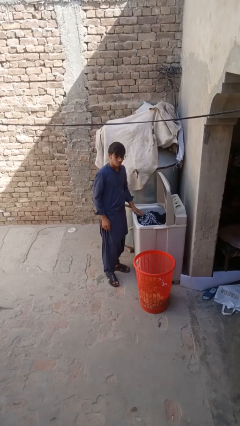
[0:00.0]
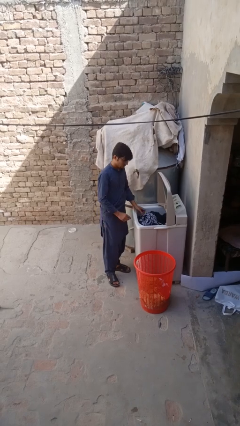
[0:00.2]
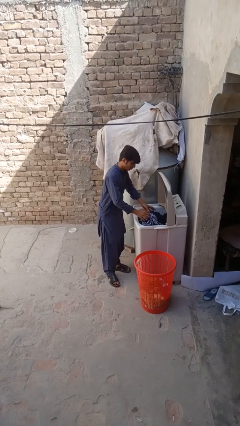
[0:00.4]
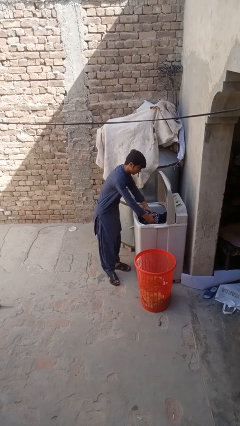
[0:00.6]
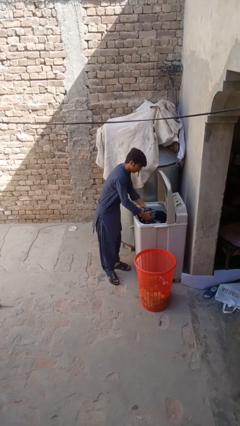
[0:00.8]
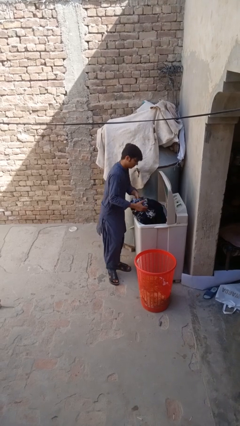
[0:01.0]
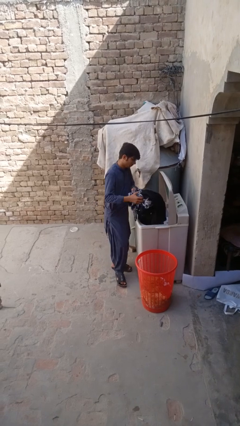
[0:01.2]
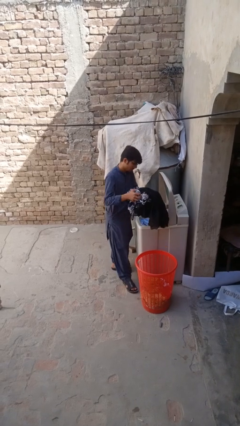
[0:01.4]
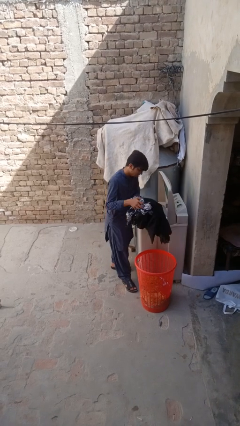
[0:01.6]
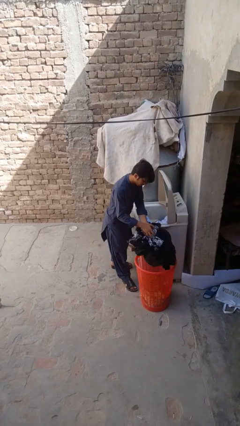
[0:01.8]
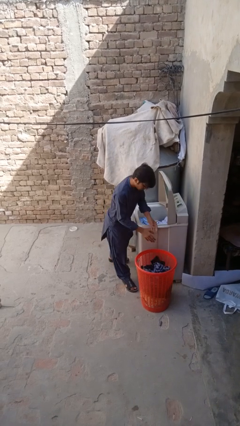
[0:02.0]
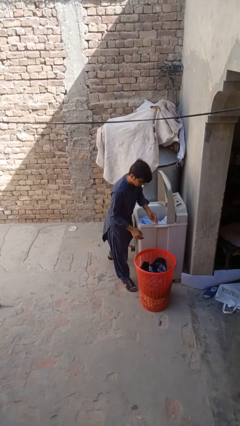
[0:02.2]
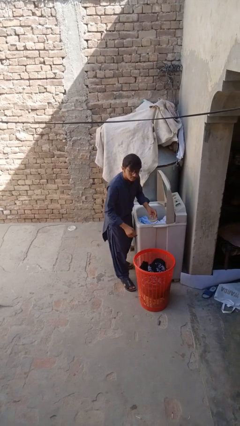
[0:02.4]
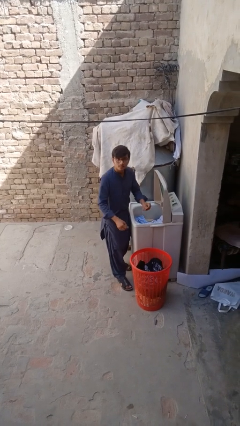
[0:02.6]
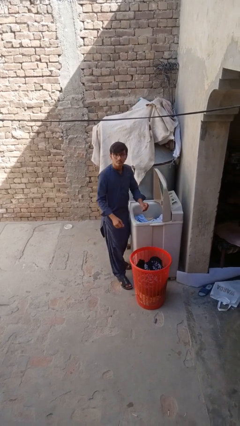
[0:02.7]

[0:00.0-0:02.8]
person unloads clotheswasher

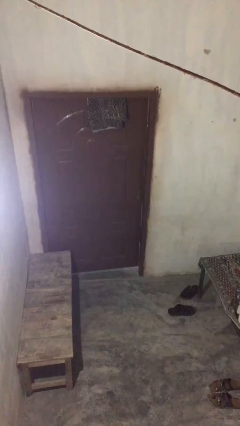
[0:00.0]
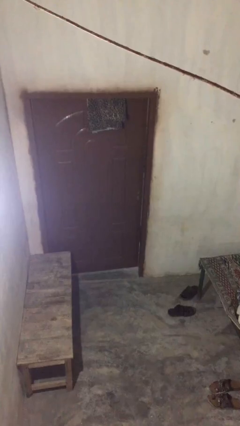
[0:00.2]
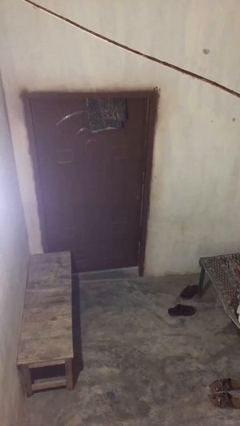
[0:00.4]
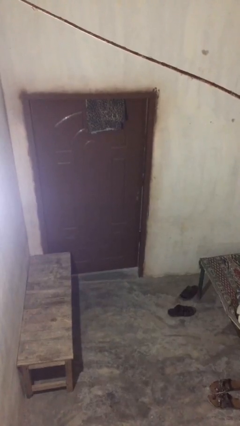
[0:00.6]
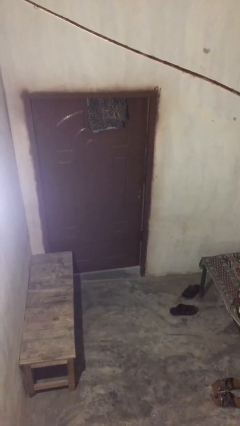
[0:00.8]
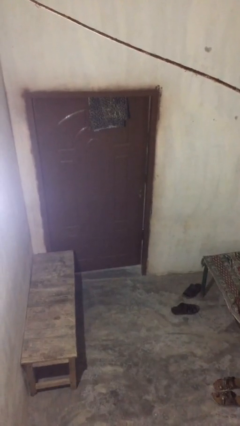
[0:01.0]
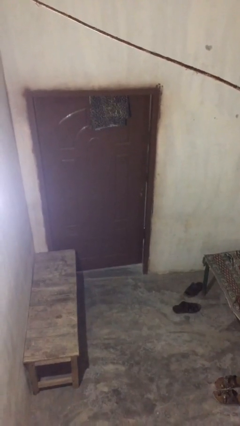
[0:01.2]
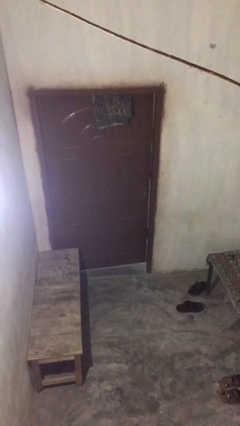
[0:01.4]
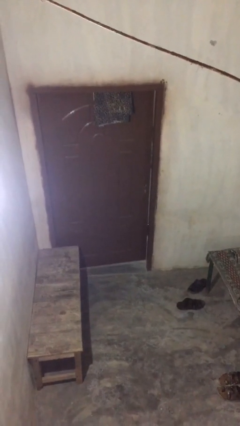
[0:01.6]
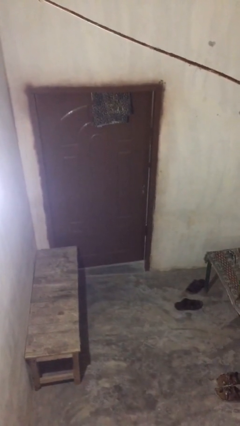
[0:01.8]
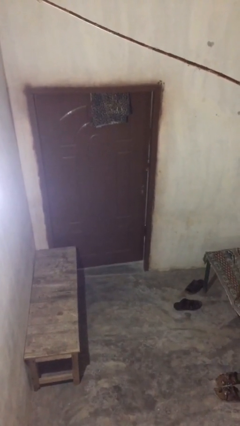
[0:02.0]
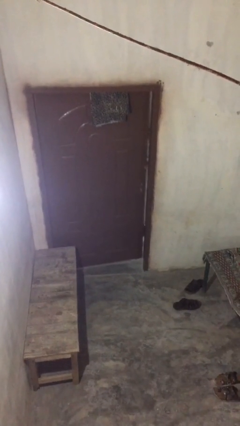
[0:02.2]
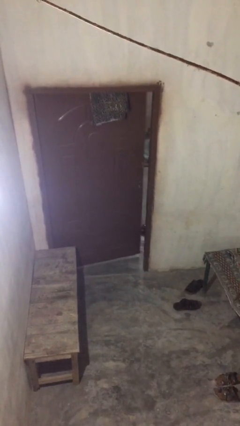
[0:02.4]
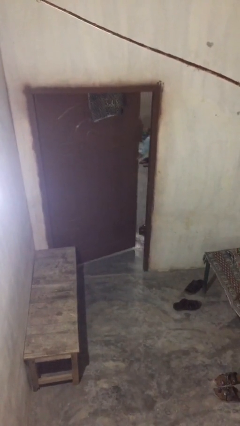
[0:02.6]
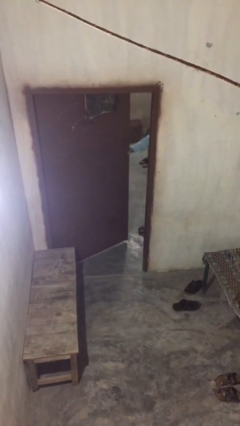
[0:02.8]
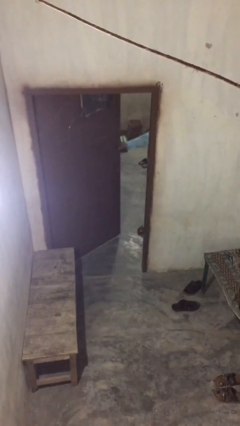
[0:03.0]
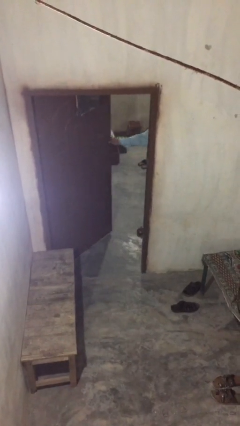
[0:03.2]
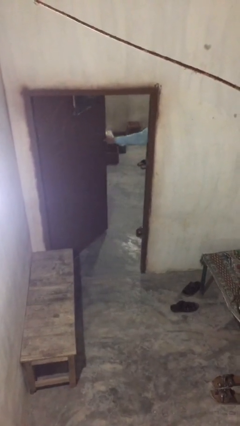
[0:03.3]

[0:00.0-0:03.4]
person opens facility door

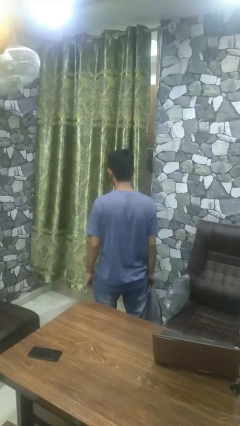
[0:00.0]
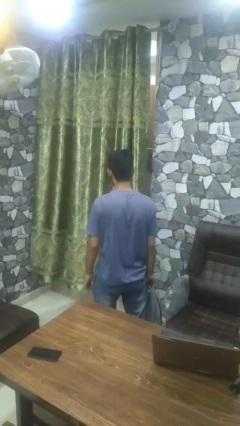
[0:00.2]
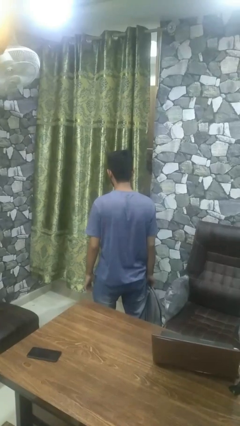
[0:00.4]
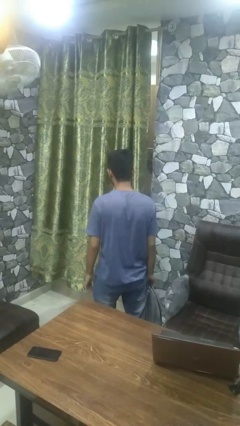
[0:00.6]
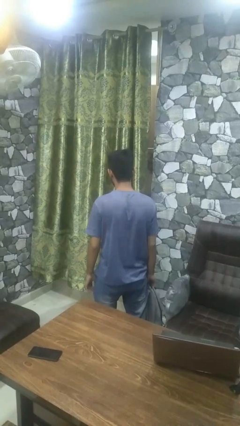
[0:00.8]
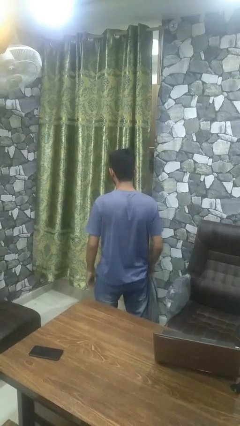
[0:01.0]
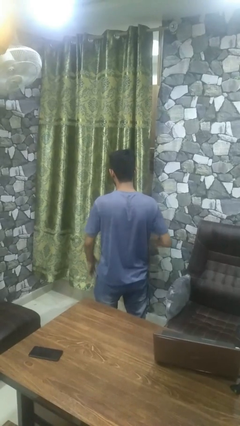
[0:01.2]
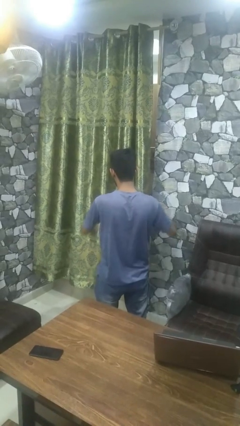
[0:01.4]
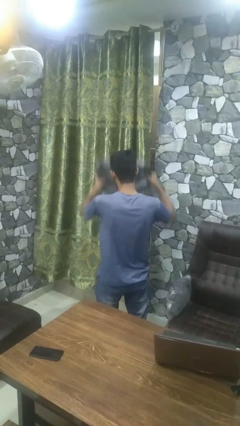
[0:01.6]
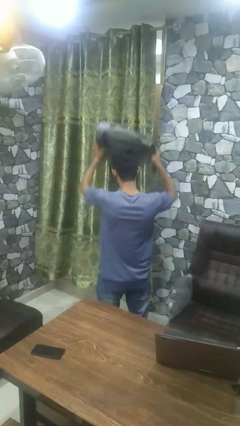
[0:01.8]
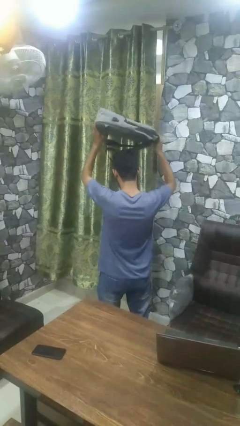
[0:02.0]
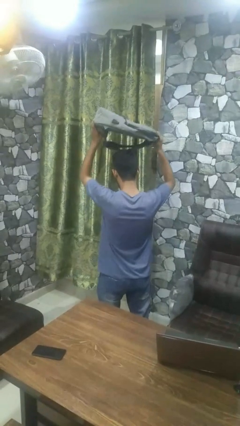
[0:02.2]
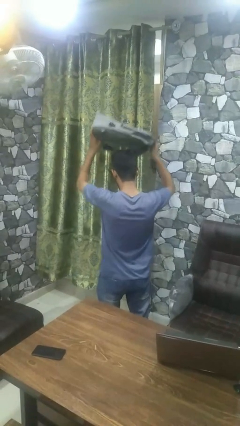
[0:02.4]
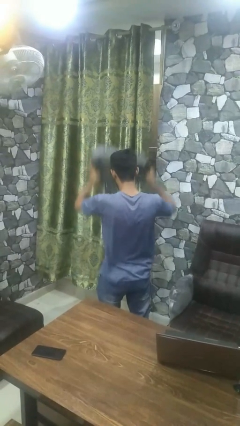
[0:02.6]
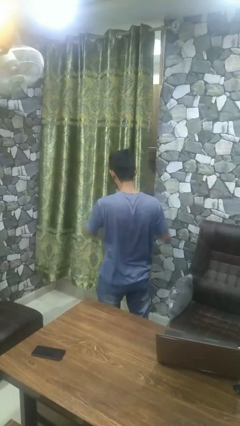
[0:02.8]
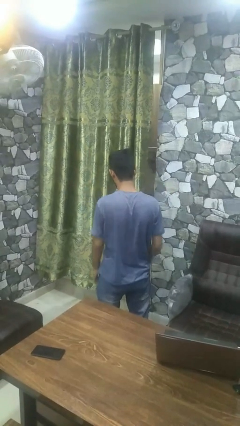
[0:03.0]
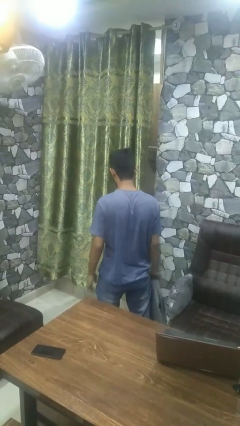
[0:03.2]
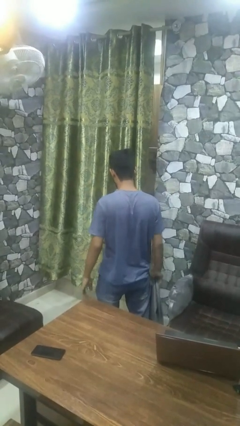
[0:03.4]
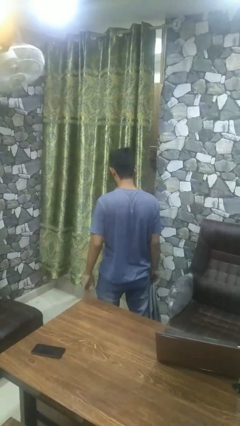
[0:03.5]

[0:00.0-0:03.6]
person holds object above head

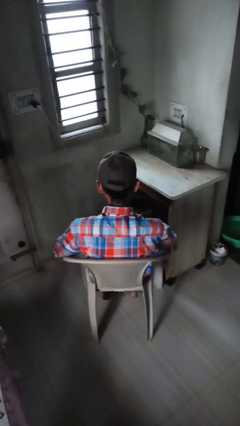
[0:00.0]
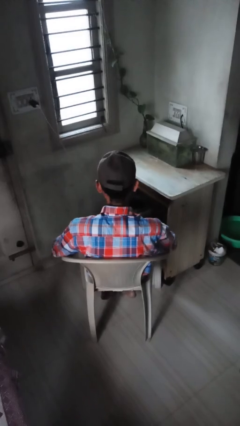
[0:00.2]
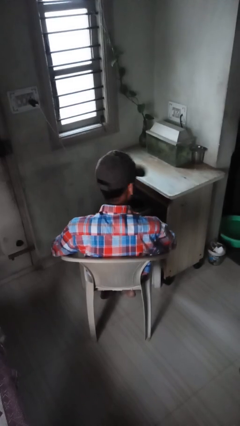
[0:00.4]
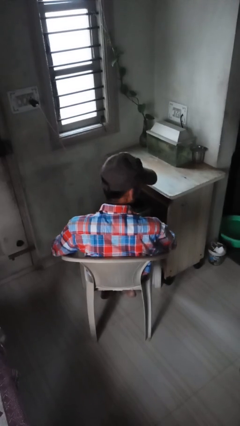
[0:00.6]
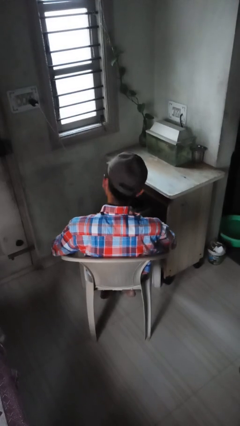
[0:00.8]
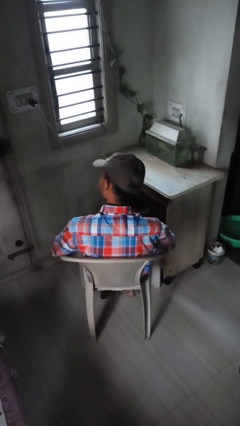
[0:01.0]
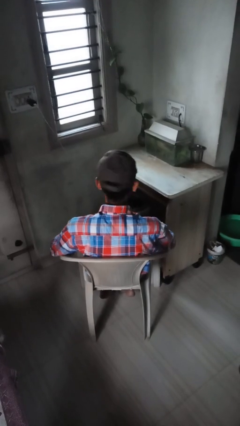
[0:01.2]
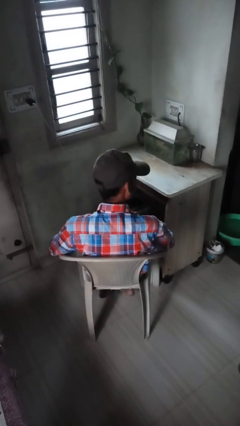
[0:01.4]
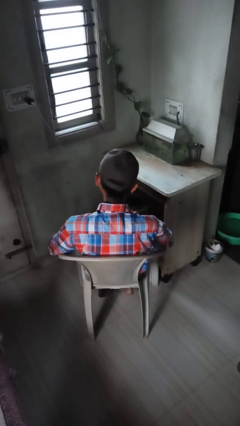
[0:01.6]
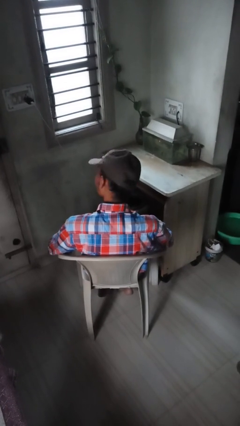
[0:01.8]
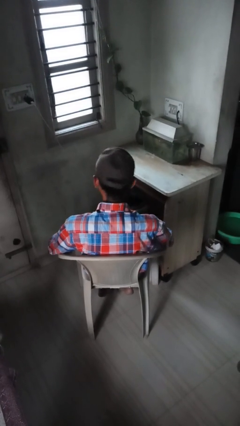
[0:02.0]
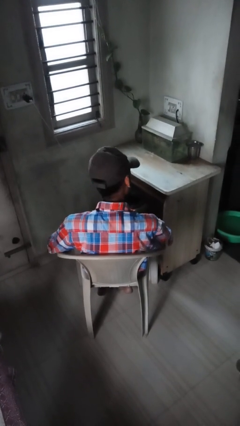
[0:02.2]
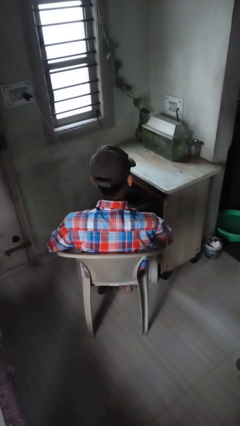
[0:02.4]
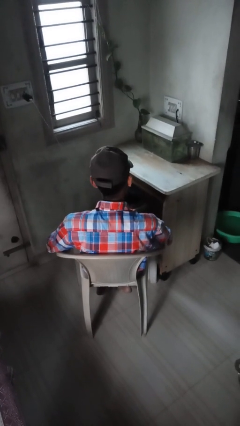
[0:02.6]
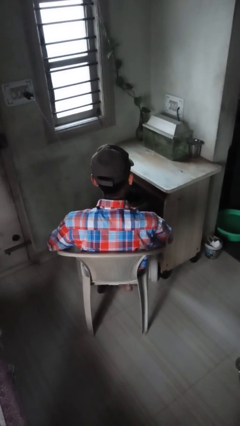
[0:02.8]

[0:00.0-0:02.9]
person shakes head

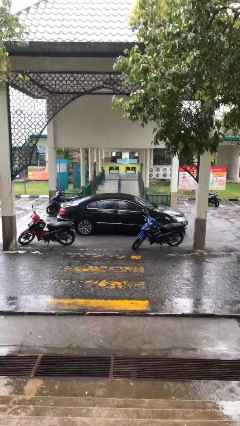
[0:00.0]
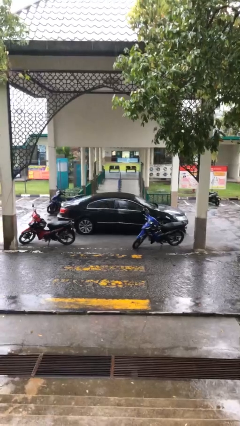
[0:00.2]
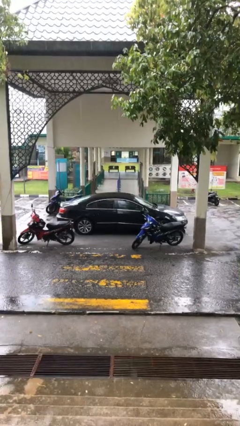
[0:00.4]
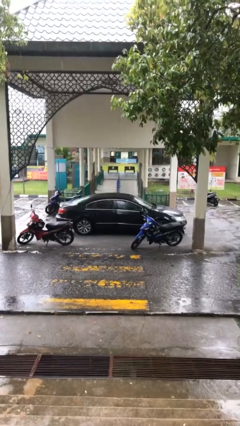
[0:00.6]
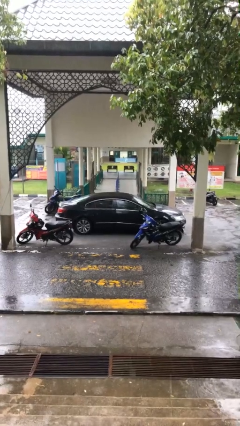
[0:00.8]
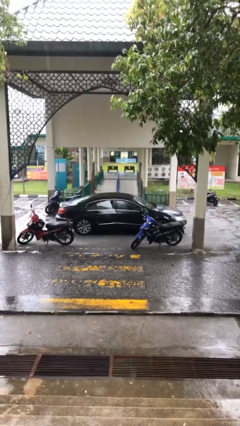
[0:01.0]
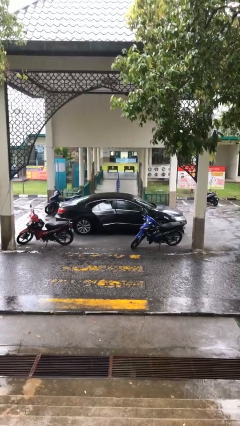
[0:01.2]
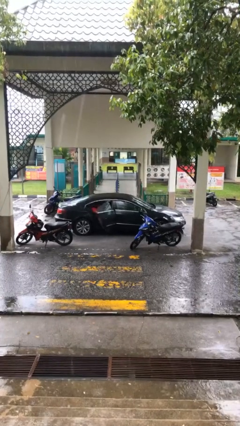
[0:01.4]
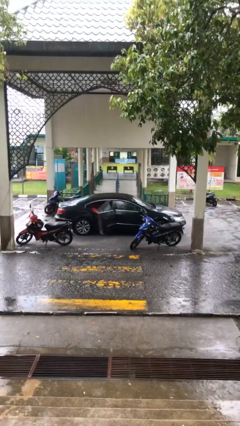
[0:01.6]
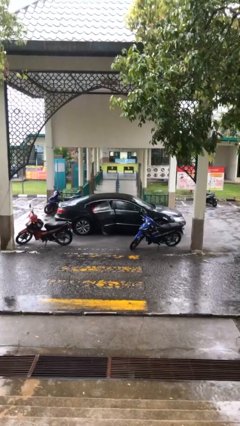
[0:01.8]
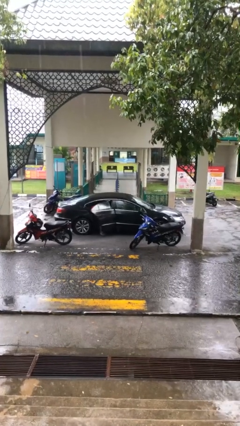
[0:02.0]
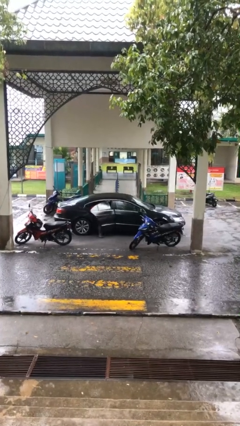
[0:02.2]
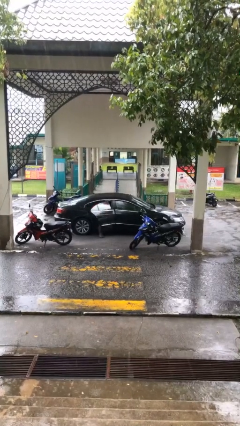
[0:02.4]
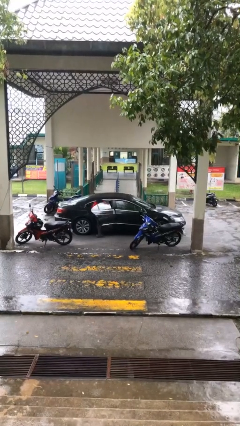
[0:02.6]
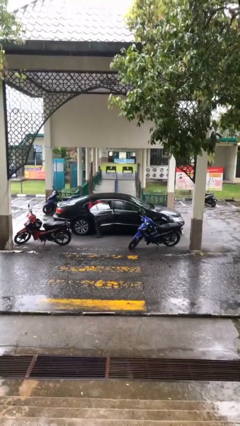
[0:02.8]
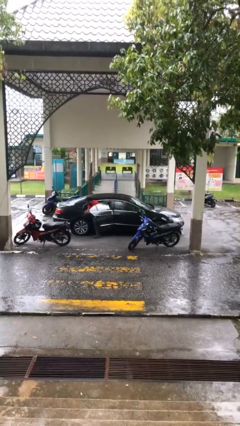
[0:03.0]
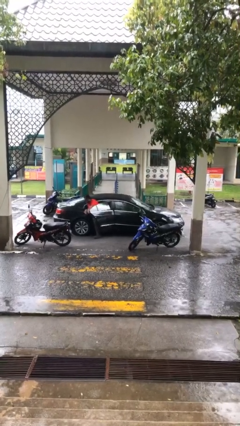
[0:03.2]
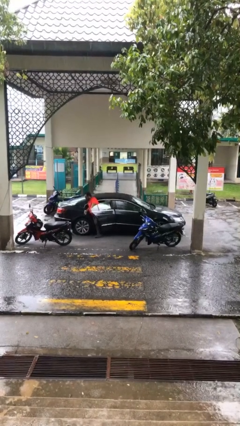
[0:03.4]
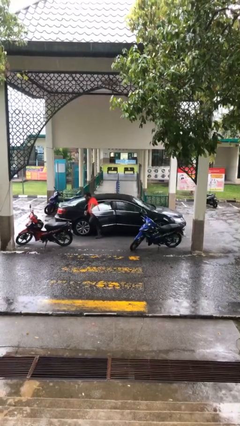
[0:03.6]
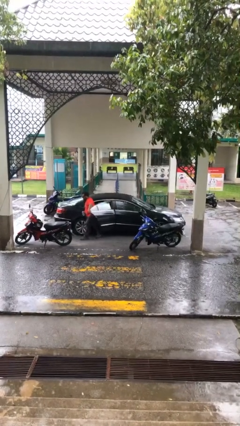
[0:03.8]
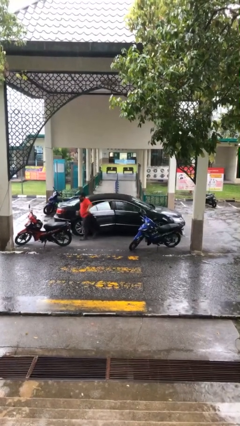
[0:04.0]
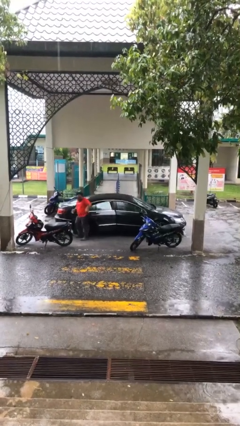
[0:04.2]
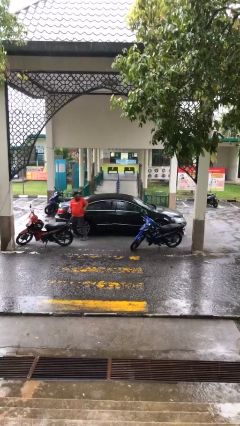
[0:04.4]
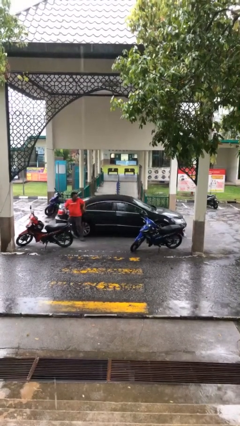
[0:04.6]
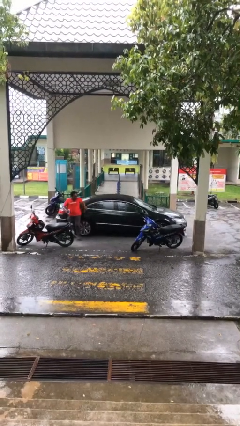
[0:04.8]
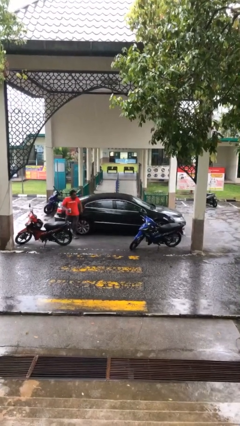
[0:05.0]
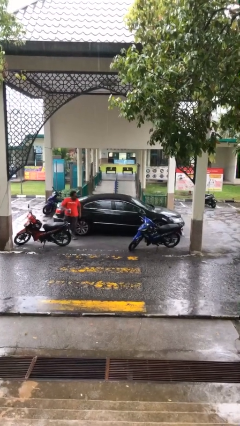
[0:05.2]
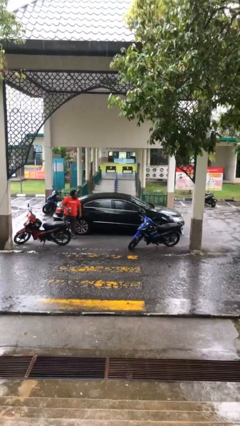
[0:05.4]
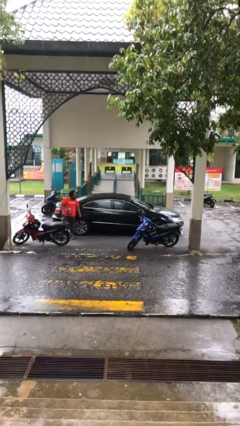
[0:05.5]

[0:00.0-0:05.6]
car drops off person
